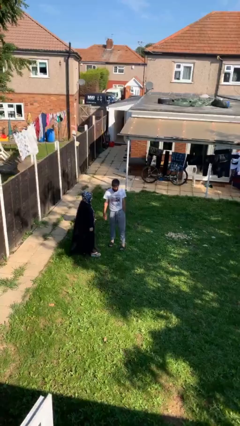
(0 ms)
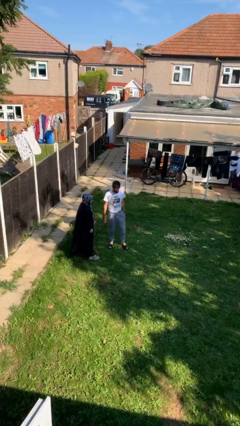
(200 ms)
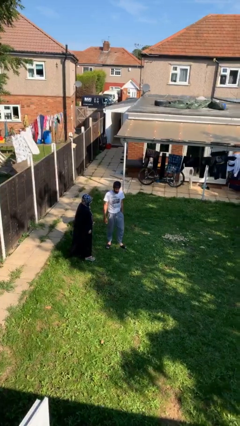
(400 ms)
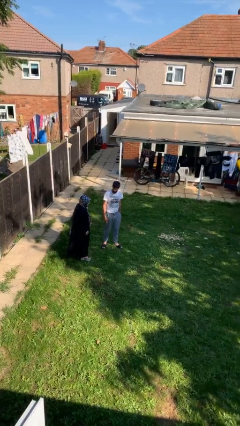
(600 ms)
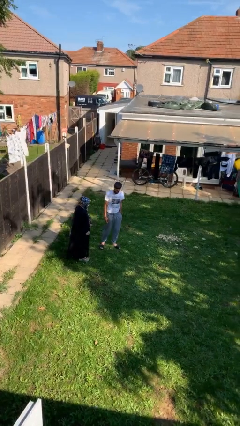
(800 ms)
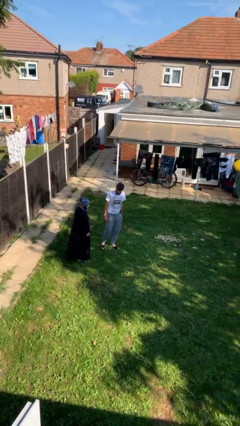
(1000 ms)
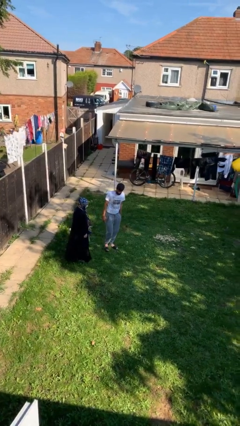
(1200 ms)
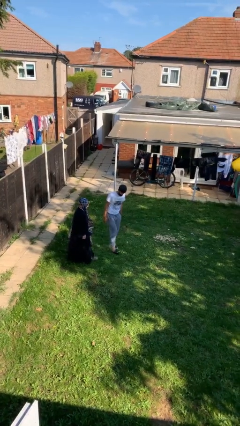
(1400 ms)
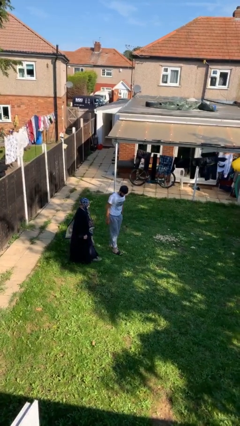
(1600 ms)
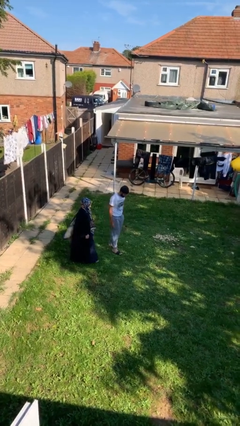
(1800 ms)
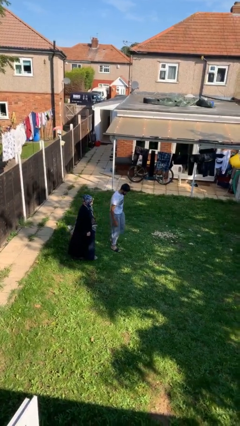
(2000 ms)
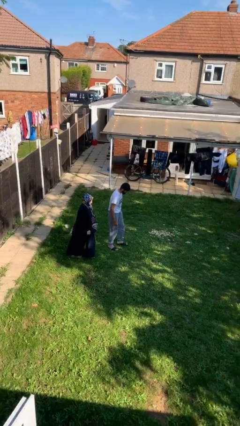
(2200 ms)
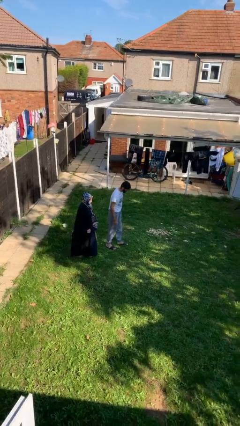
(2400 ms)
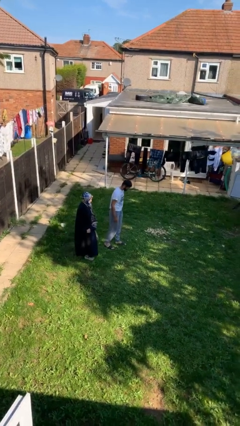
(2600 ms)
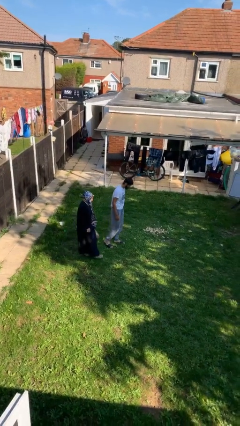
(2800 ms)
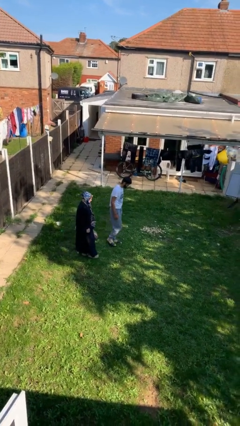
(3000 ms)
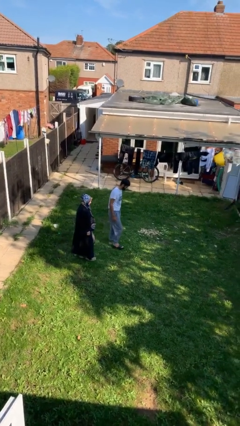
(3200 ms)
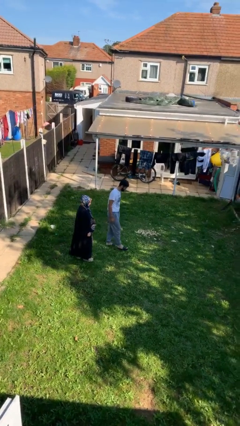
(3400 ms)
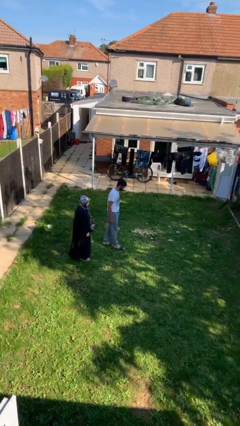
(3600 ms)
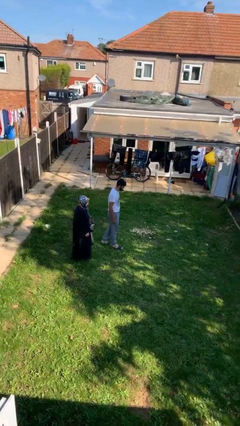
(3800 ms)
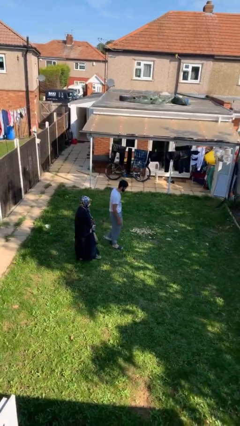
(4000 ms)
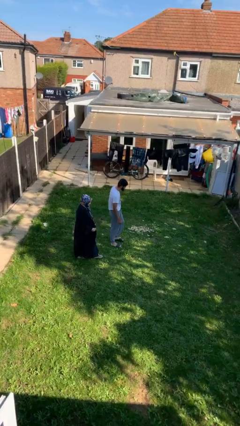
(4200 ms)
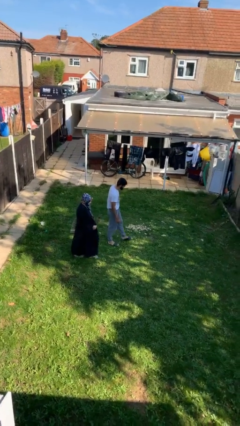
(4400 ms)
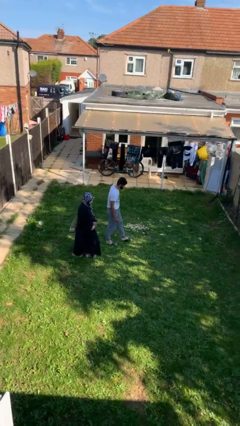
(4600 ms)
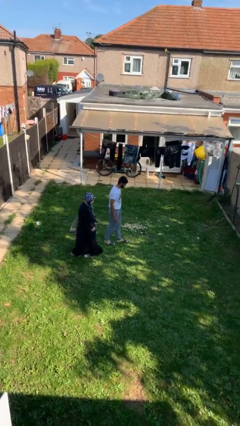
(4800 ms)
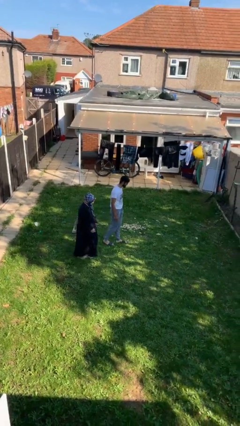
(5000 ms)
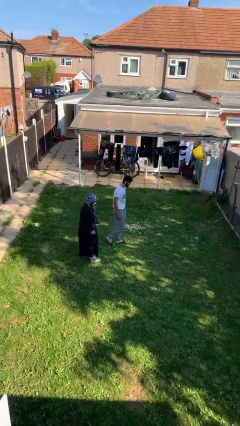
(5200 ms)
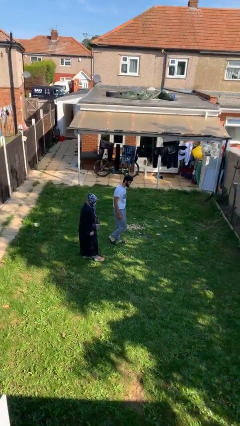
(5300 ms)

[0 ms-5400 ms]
person talks to person

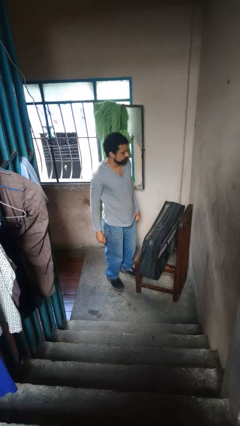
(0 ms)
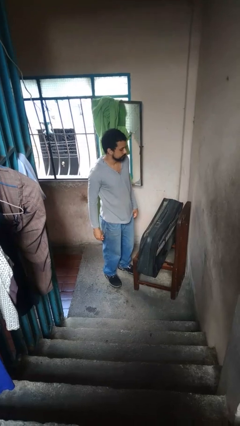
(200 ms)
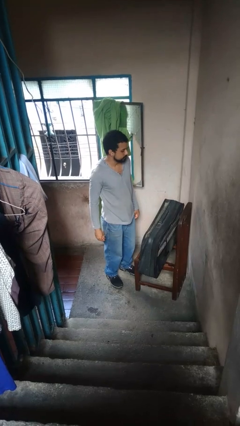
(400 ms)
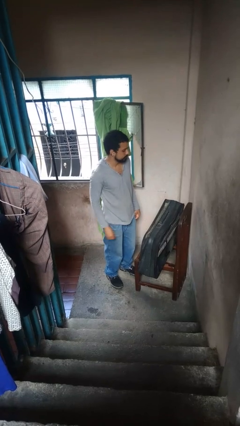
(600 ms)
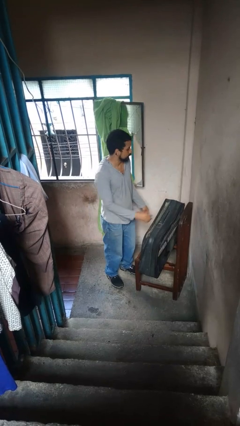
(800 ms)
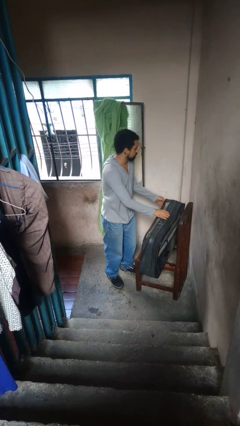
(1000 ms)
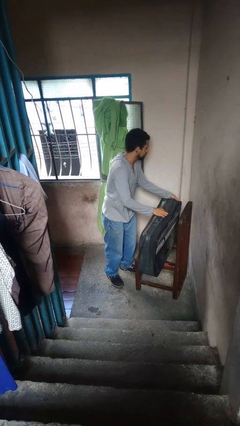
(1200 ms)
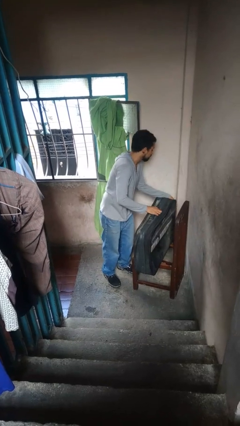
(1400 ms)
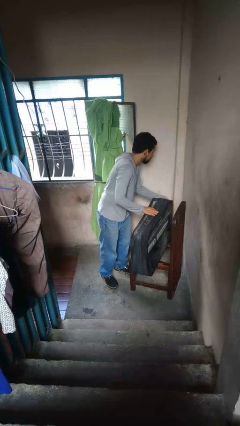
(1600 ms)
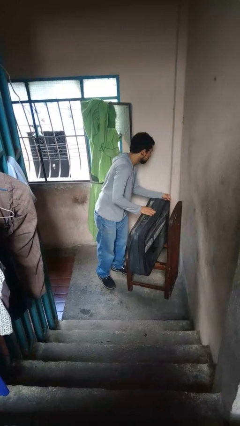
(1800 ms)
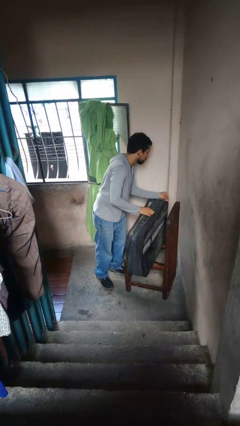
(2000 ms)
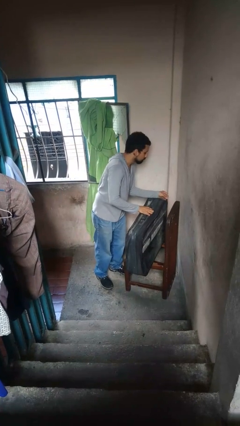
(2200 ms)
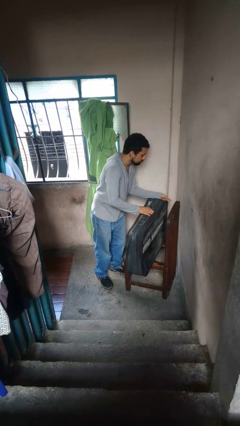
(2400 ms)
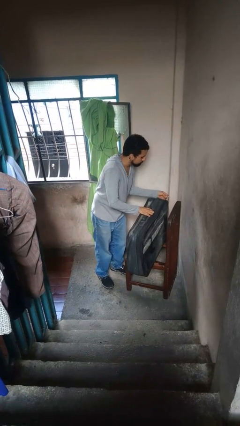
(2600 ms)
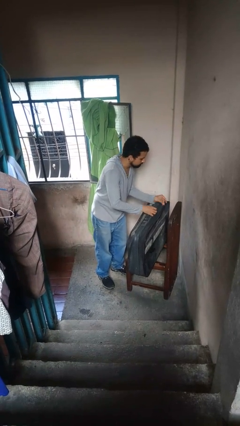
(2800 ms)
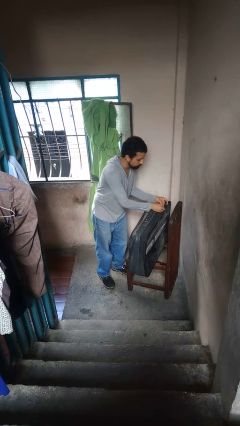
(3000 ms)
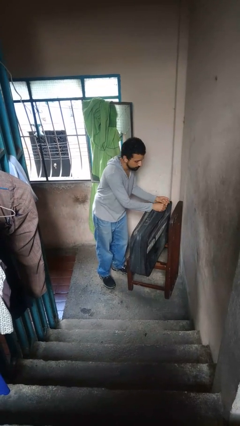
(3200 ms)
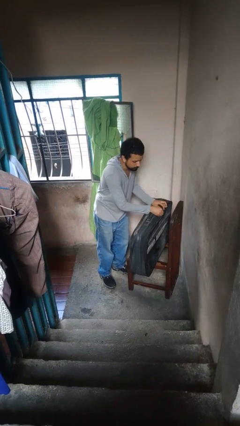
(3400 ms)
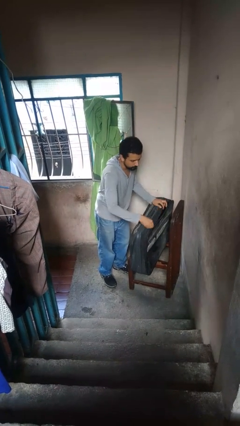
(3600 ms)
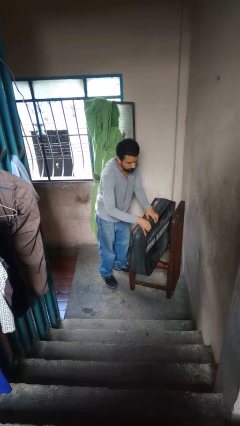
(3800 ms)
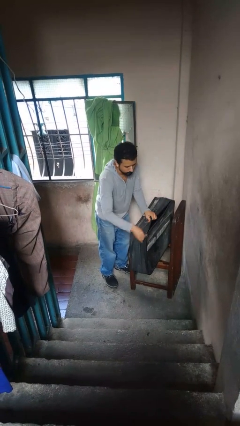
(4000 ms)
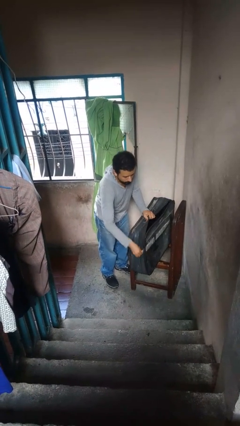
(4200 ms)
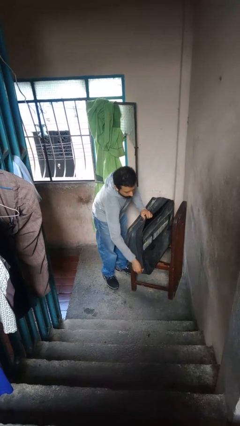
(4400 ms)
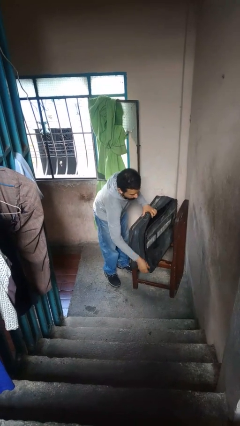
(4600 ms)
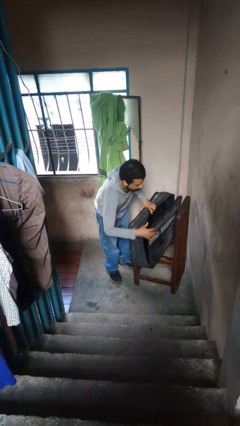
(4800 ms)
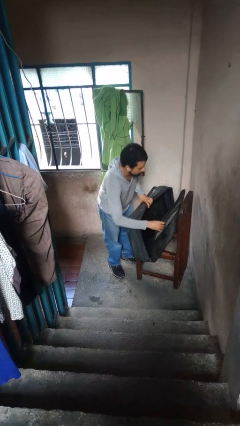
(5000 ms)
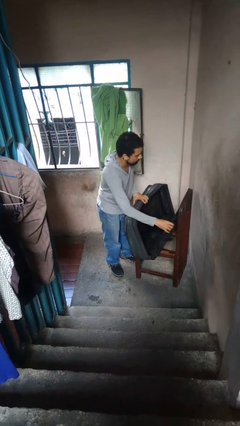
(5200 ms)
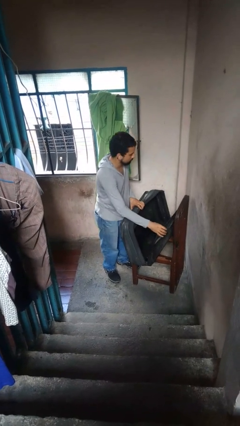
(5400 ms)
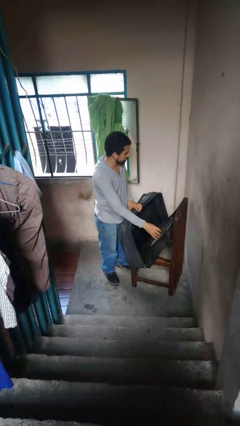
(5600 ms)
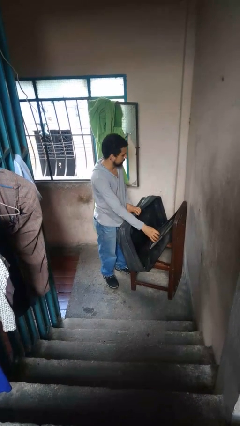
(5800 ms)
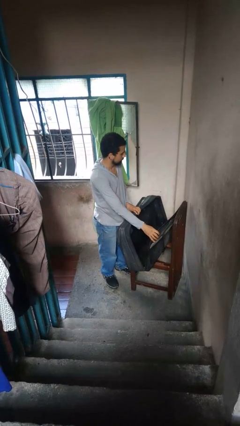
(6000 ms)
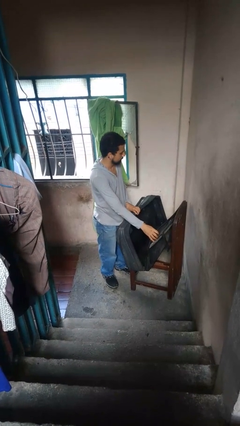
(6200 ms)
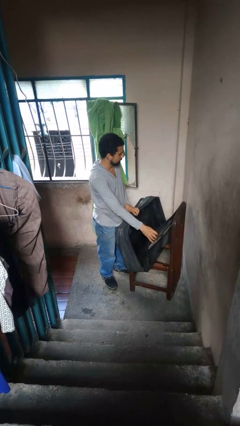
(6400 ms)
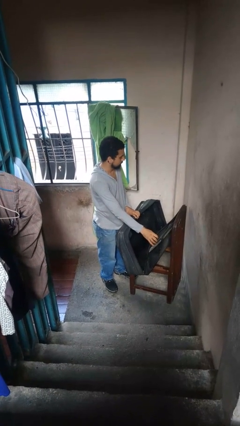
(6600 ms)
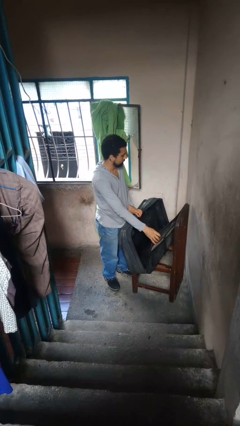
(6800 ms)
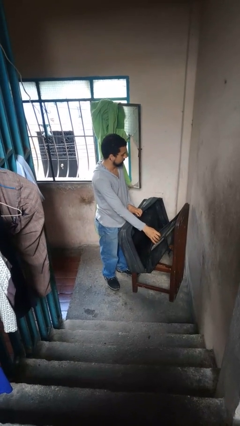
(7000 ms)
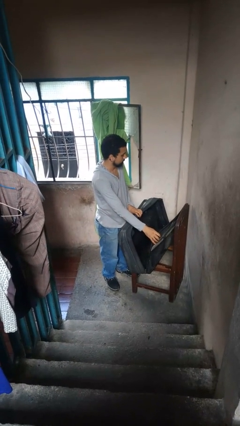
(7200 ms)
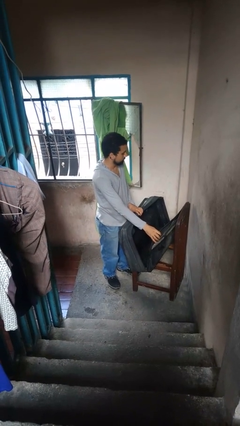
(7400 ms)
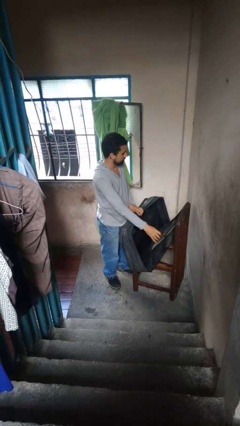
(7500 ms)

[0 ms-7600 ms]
person opens suitcase

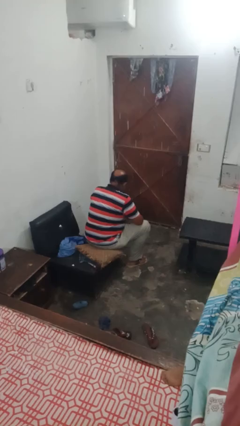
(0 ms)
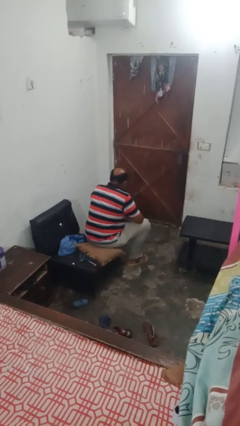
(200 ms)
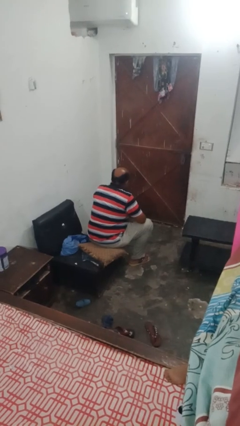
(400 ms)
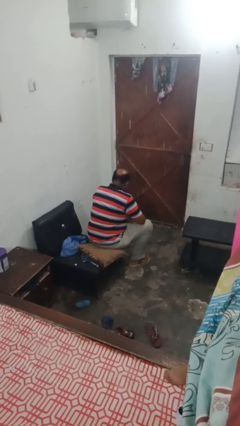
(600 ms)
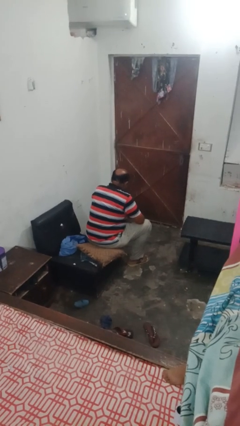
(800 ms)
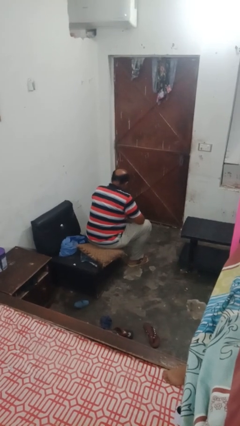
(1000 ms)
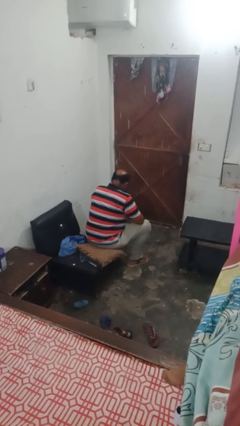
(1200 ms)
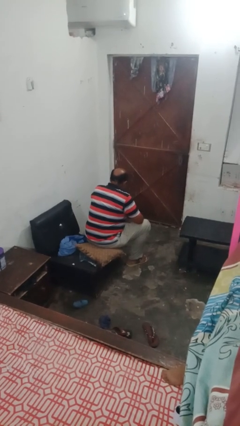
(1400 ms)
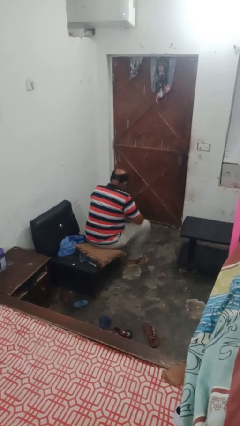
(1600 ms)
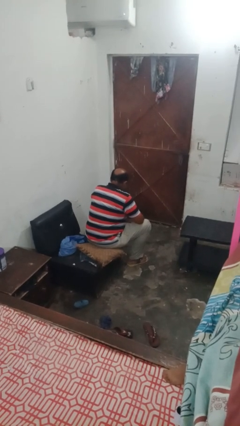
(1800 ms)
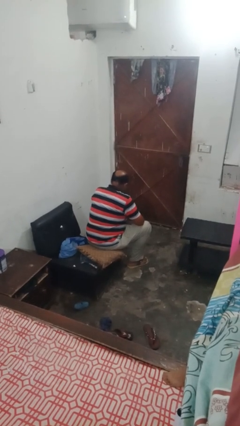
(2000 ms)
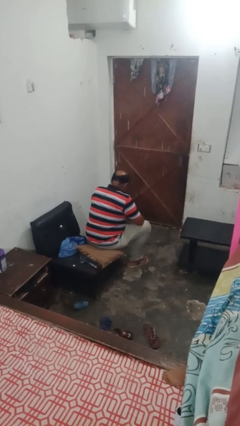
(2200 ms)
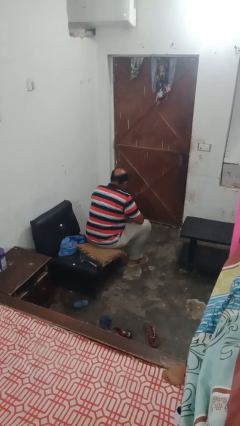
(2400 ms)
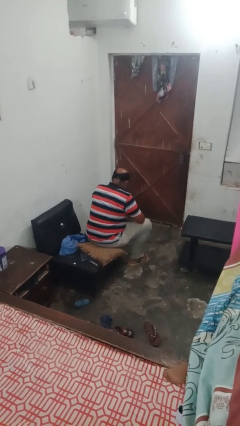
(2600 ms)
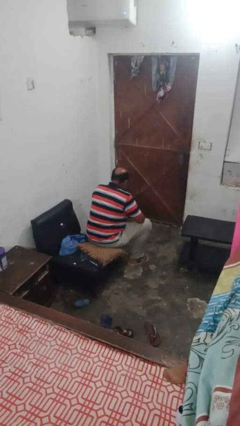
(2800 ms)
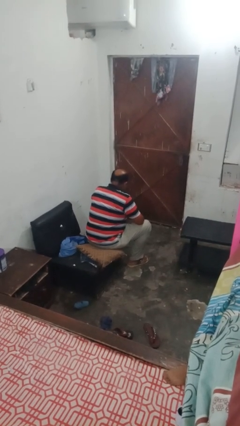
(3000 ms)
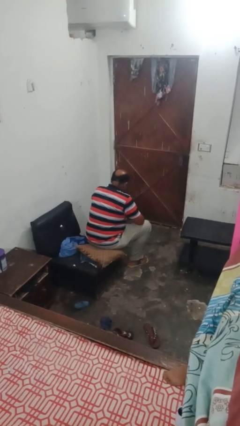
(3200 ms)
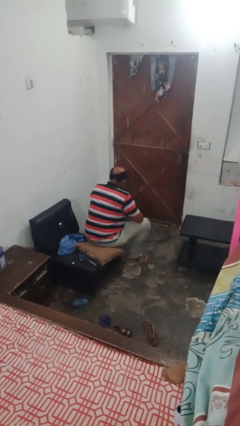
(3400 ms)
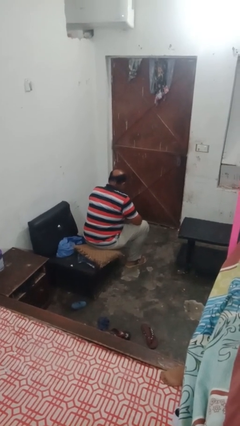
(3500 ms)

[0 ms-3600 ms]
person nods head

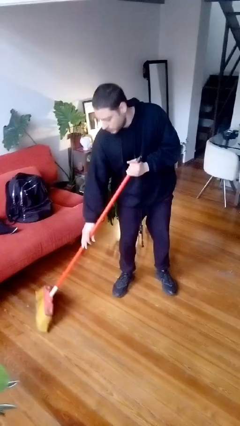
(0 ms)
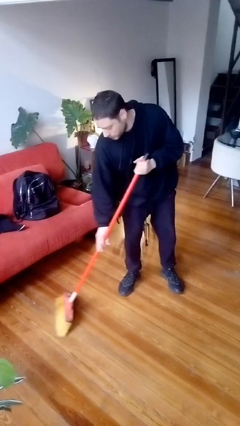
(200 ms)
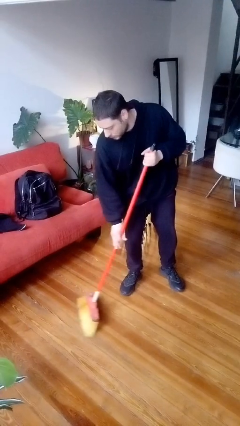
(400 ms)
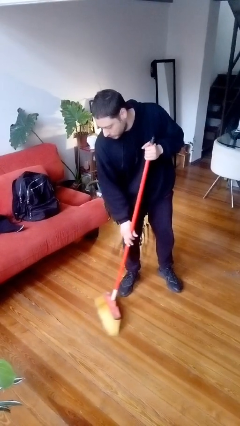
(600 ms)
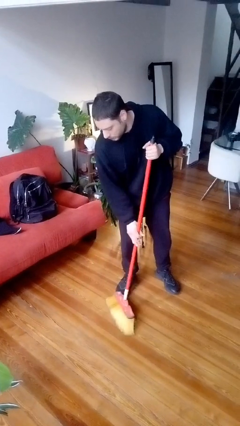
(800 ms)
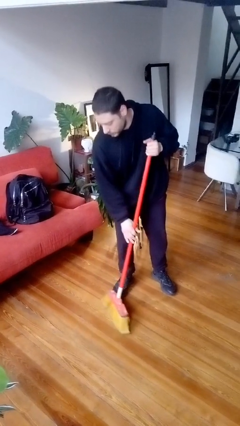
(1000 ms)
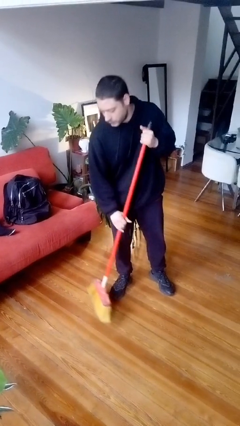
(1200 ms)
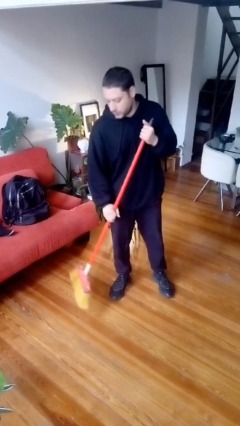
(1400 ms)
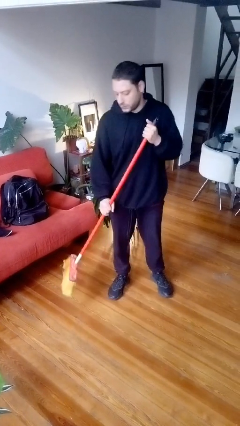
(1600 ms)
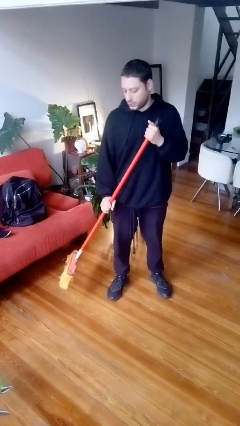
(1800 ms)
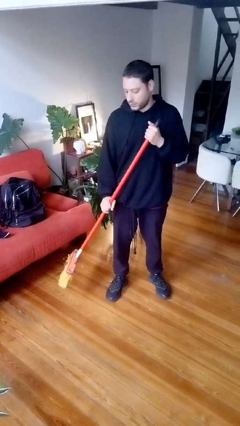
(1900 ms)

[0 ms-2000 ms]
person sweeps floor
